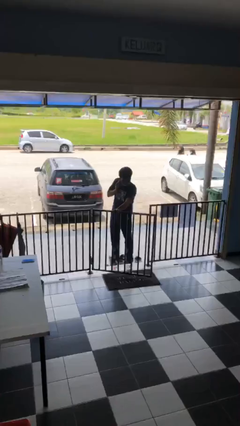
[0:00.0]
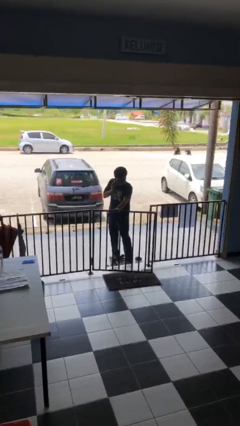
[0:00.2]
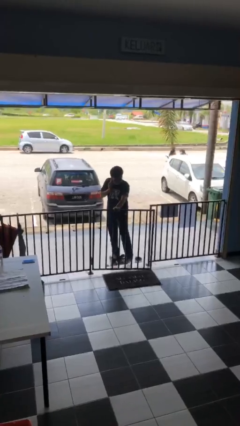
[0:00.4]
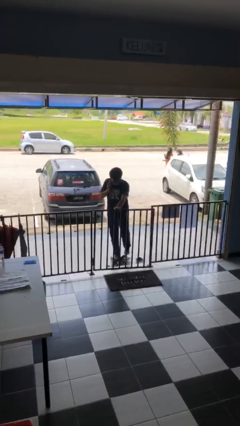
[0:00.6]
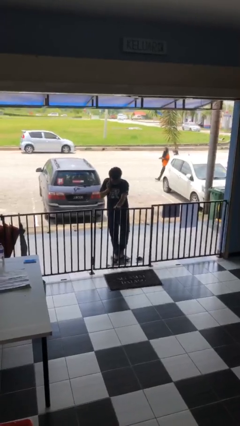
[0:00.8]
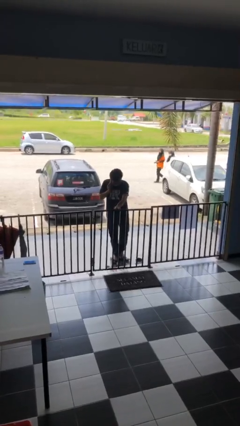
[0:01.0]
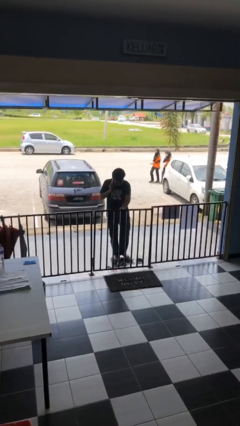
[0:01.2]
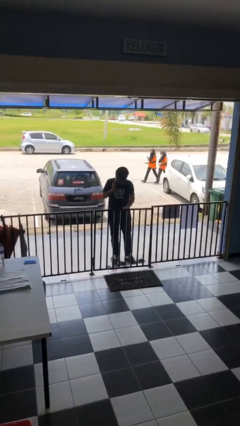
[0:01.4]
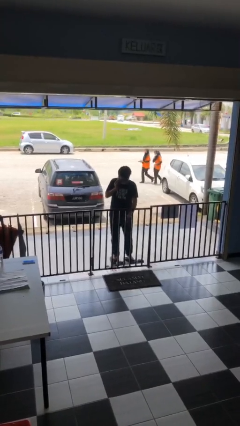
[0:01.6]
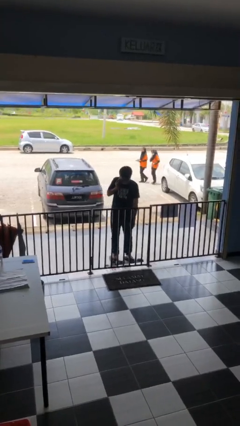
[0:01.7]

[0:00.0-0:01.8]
person closes facility door

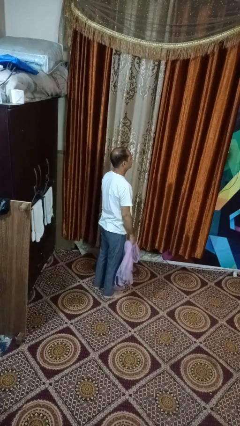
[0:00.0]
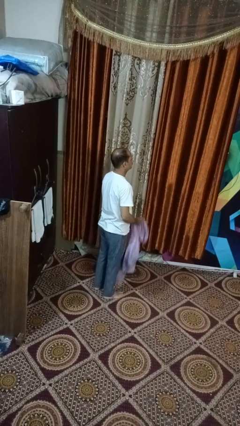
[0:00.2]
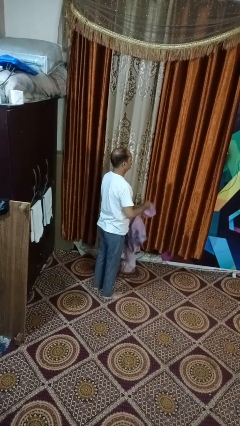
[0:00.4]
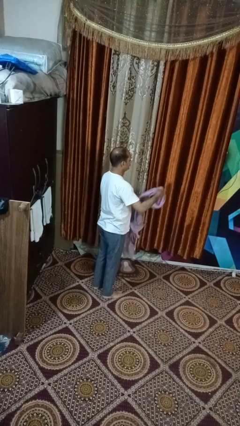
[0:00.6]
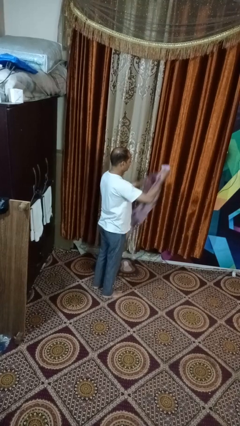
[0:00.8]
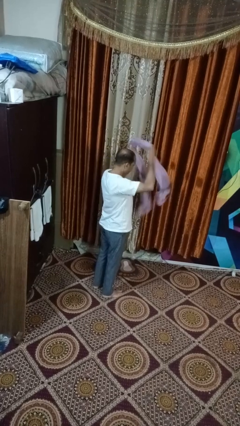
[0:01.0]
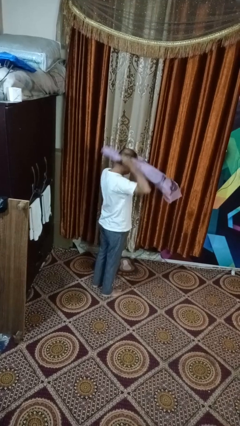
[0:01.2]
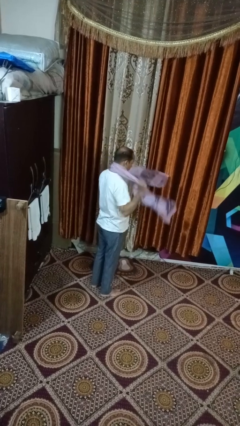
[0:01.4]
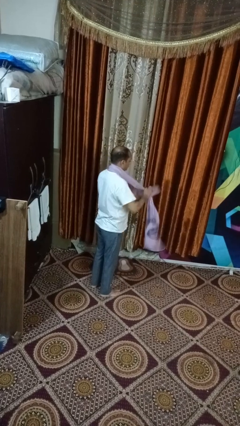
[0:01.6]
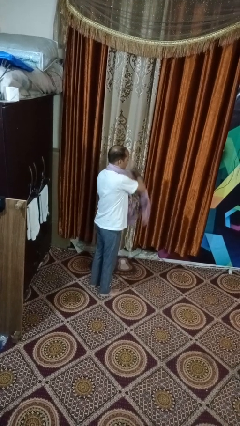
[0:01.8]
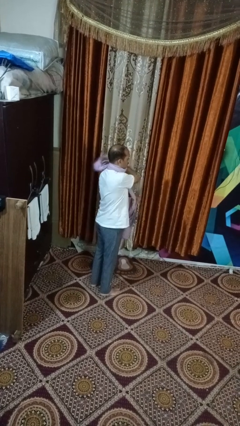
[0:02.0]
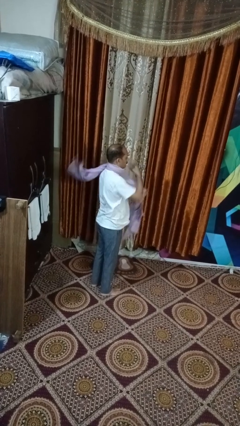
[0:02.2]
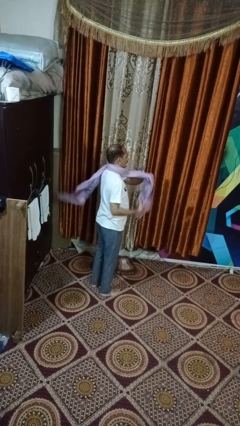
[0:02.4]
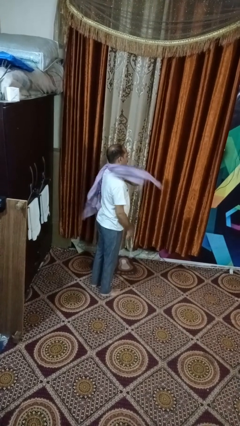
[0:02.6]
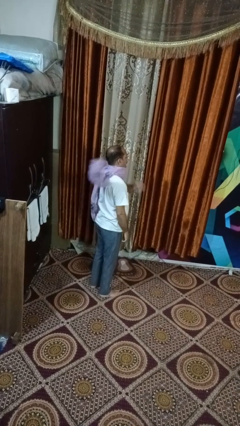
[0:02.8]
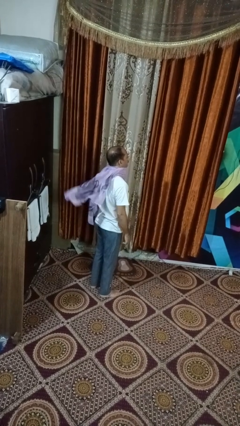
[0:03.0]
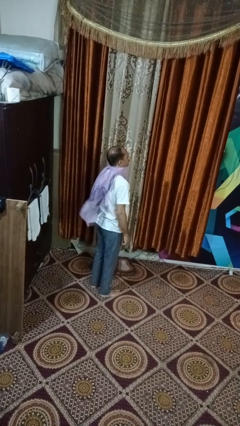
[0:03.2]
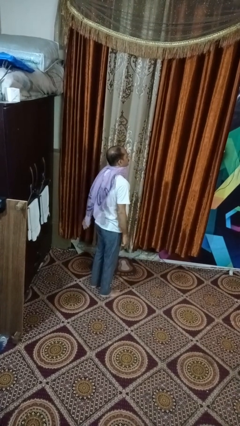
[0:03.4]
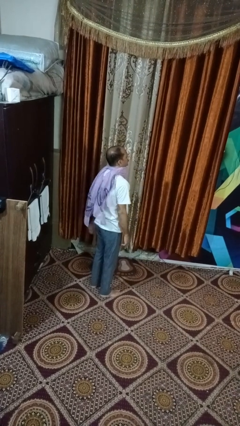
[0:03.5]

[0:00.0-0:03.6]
person puts on scarf

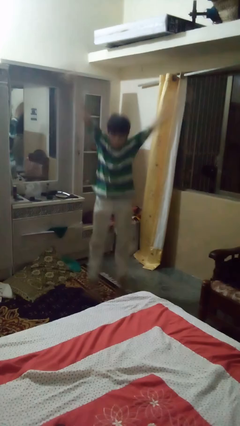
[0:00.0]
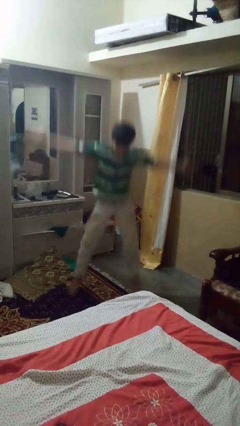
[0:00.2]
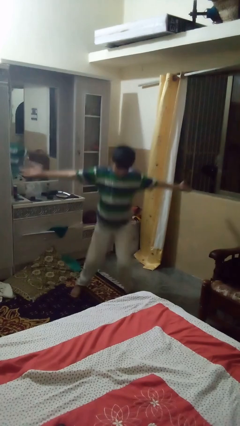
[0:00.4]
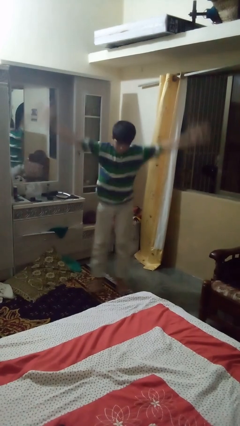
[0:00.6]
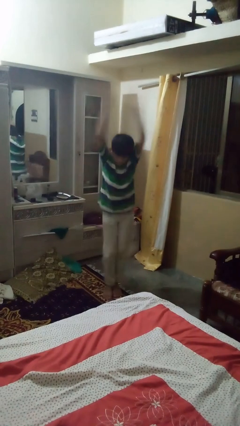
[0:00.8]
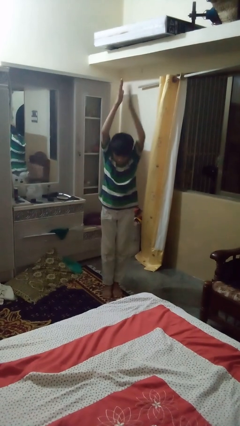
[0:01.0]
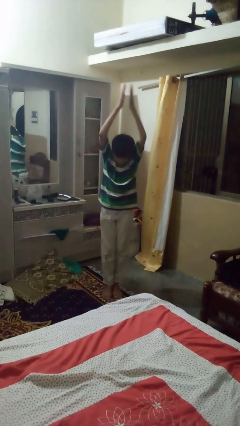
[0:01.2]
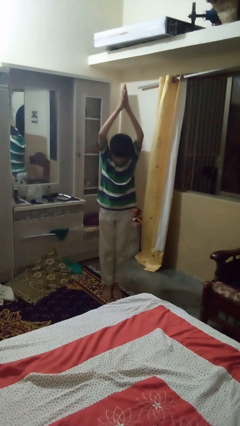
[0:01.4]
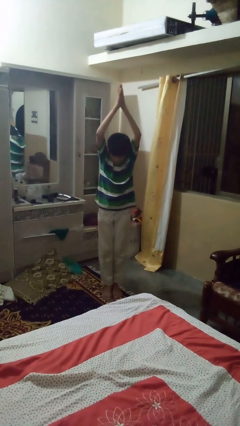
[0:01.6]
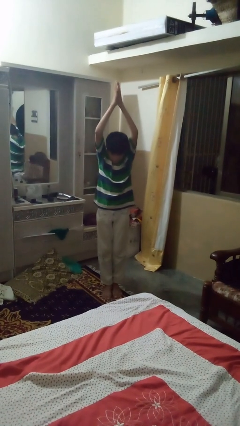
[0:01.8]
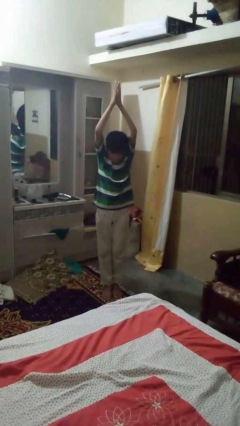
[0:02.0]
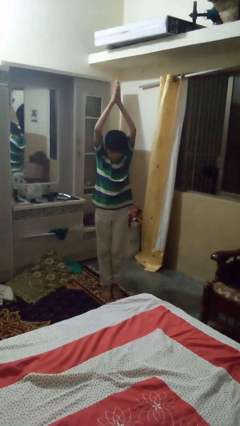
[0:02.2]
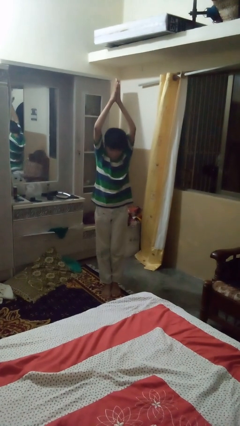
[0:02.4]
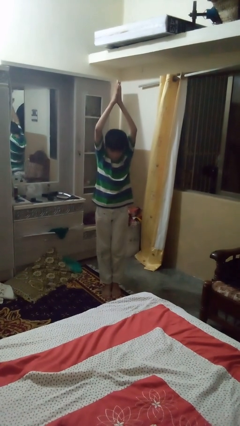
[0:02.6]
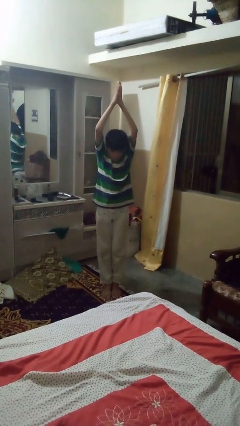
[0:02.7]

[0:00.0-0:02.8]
person exercises with jumping jacks

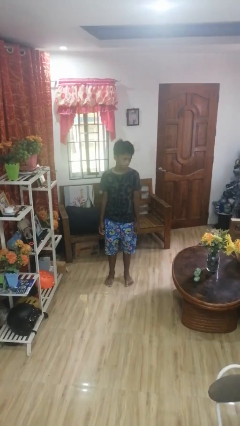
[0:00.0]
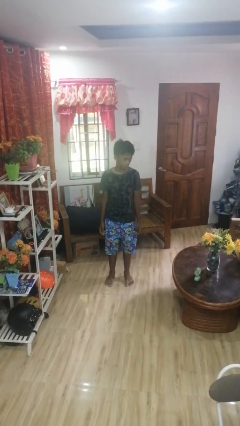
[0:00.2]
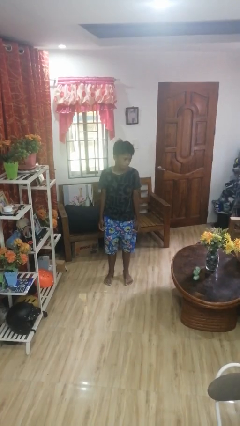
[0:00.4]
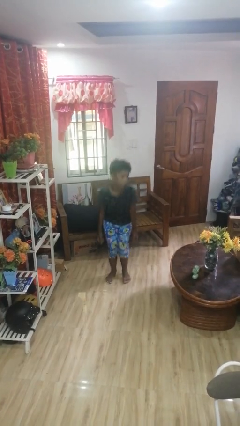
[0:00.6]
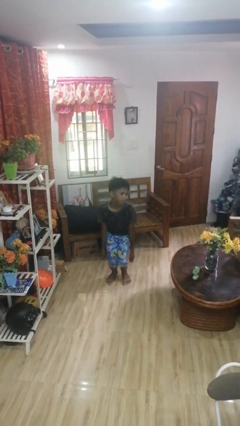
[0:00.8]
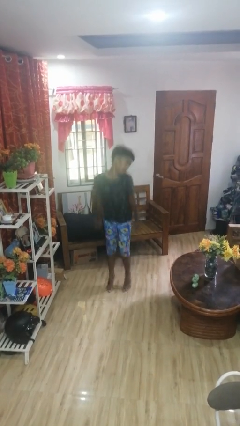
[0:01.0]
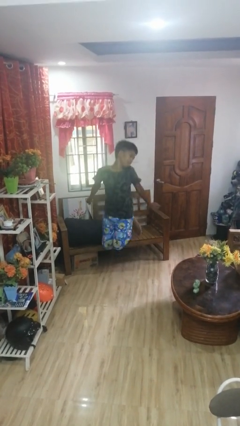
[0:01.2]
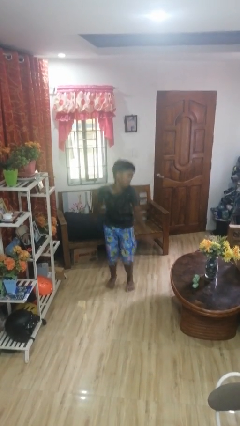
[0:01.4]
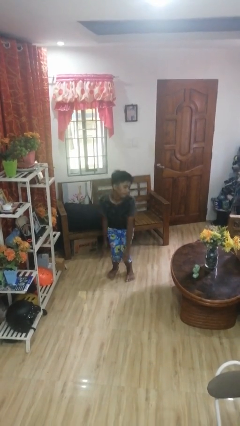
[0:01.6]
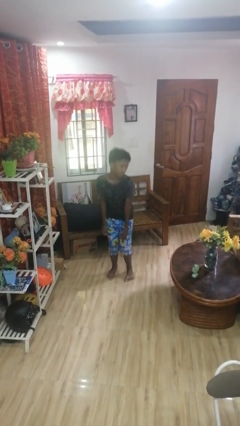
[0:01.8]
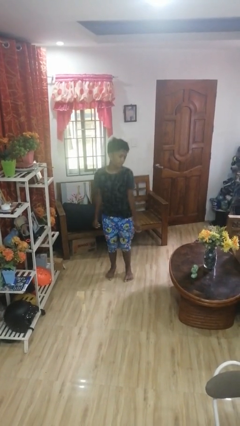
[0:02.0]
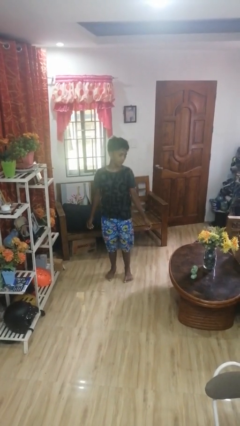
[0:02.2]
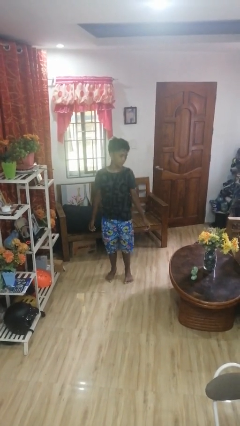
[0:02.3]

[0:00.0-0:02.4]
person jumps

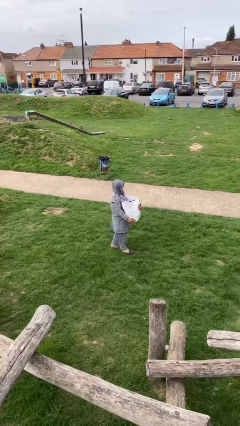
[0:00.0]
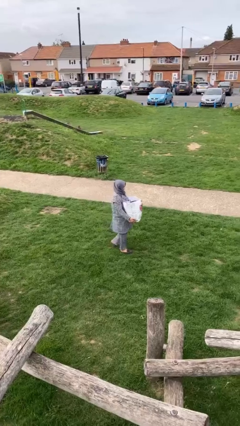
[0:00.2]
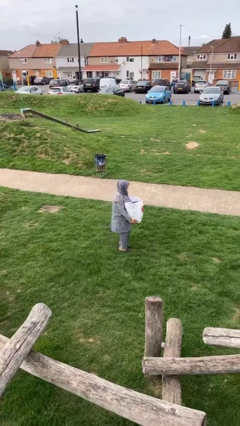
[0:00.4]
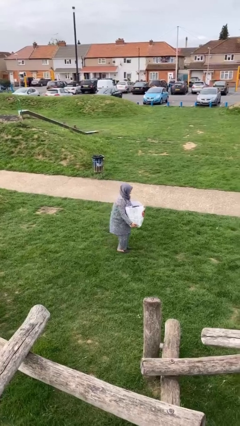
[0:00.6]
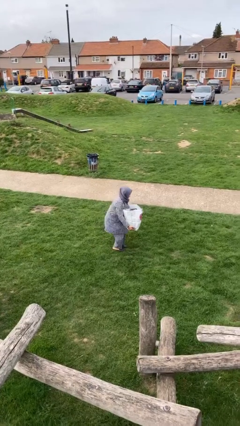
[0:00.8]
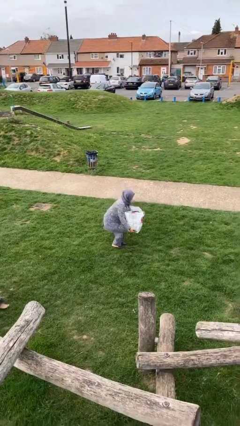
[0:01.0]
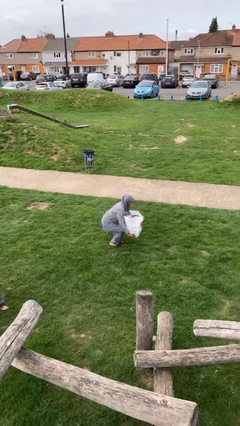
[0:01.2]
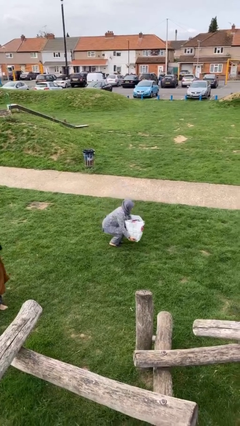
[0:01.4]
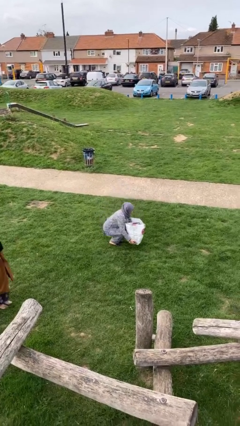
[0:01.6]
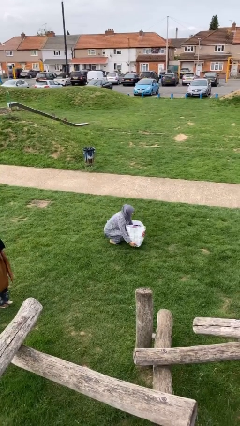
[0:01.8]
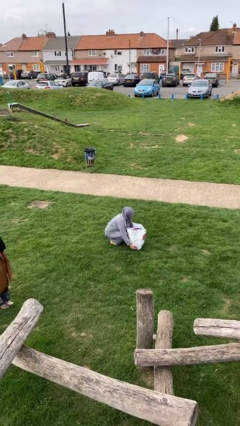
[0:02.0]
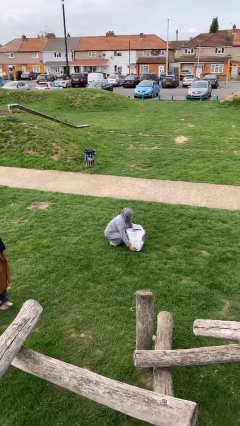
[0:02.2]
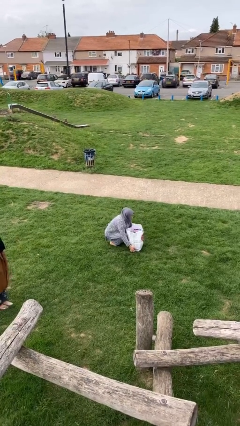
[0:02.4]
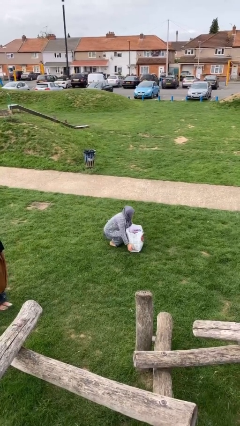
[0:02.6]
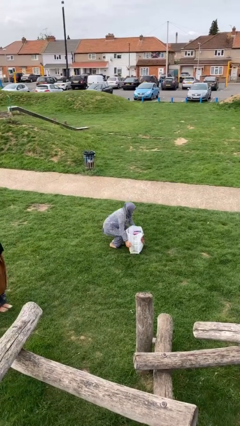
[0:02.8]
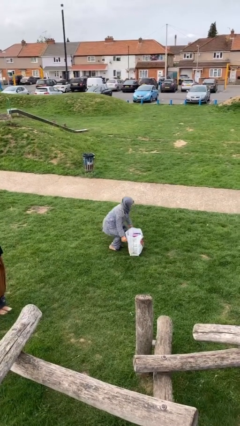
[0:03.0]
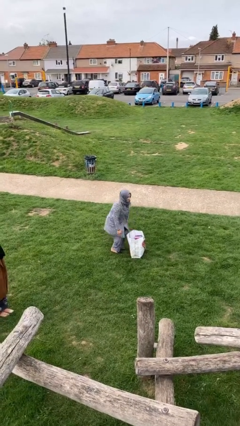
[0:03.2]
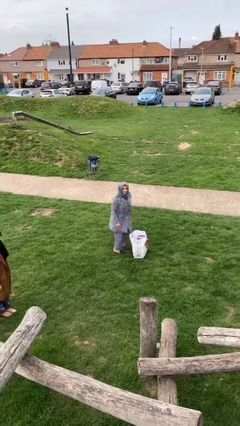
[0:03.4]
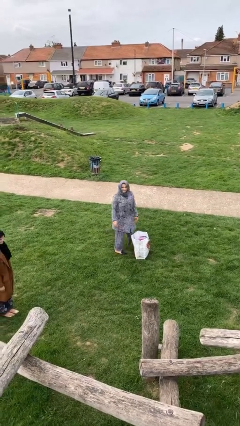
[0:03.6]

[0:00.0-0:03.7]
person puts down object on floor

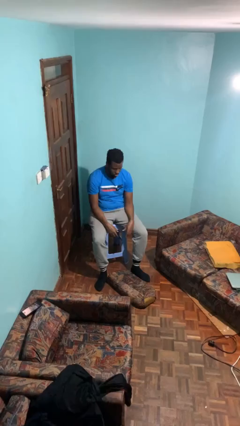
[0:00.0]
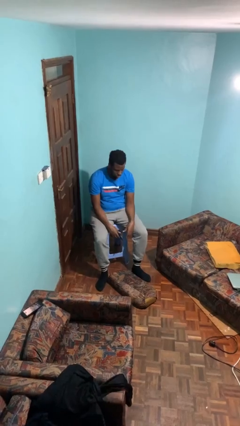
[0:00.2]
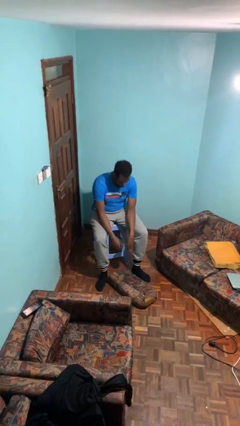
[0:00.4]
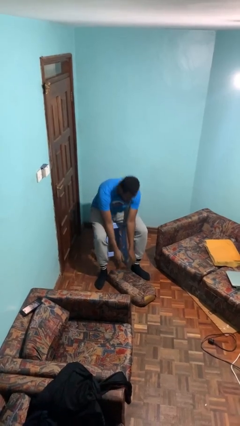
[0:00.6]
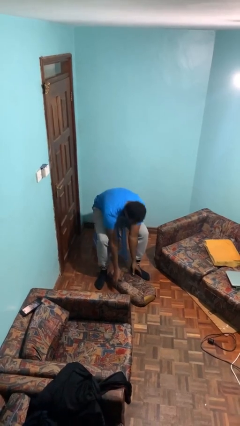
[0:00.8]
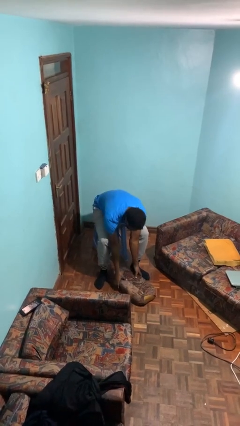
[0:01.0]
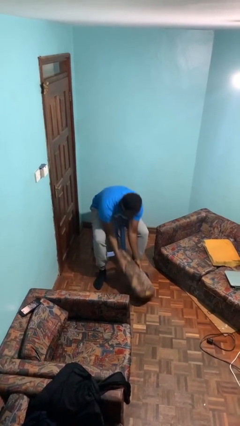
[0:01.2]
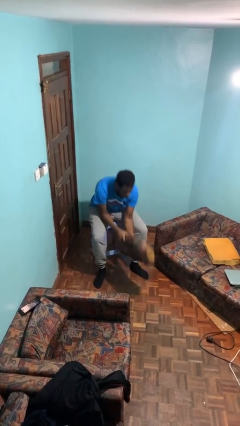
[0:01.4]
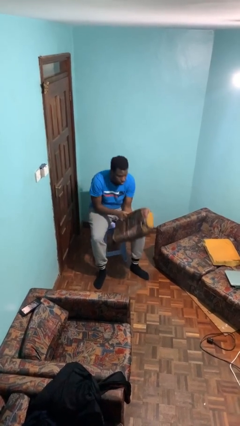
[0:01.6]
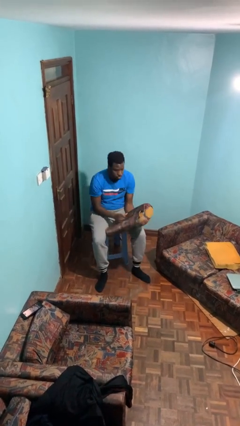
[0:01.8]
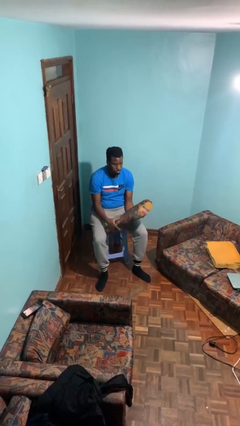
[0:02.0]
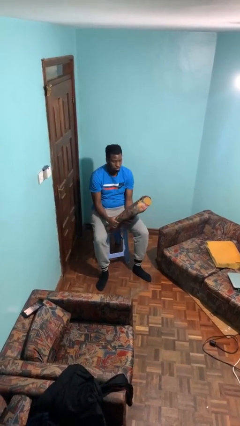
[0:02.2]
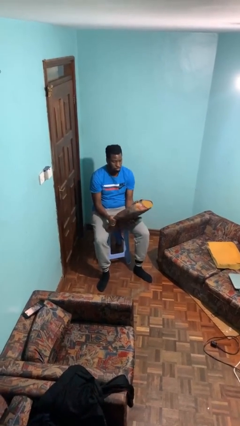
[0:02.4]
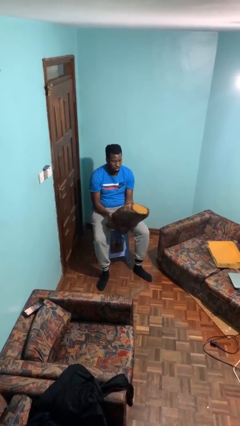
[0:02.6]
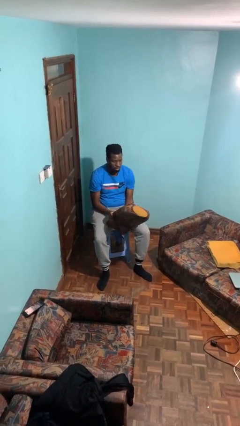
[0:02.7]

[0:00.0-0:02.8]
person picks up object from floor

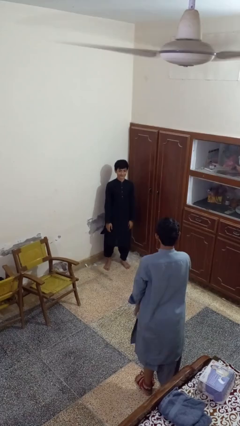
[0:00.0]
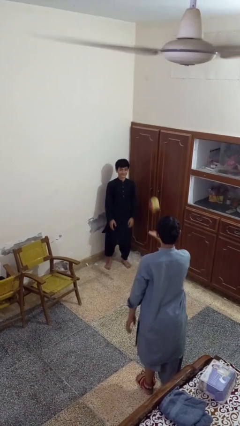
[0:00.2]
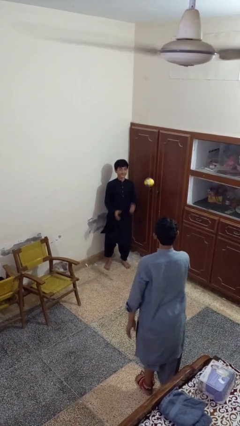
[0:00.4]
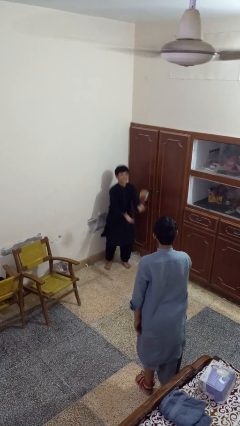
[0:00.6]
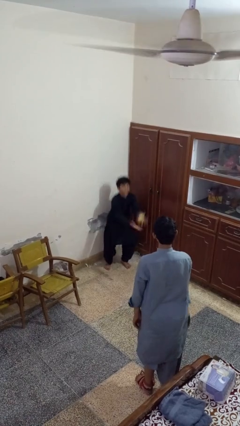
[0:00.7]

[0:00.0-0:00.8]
person catches object from person
